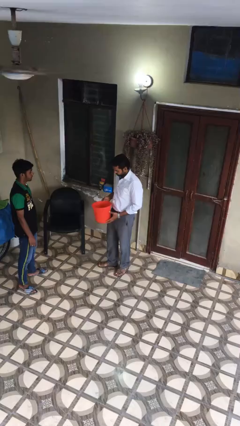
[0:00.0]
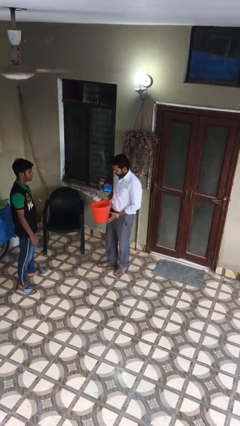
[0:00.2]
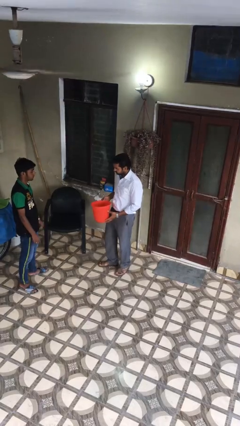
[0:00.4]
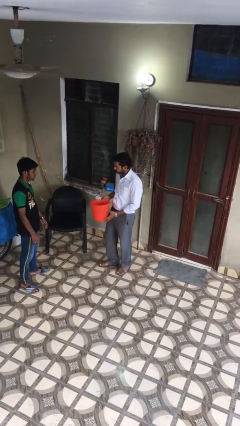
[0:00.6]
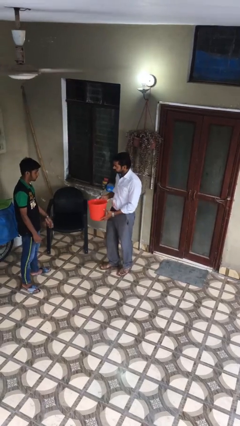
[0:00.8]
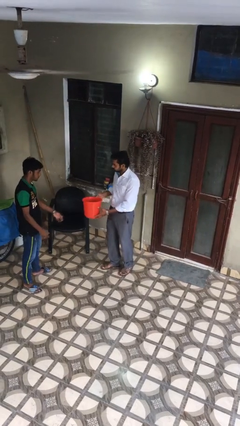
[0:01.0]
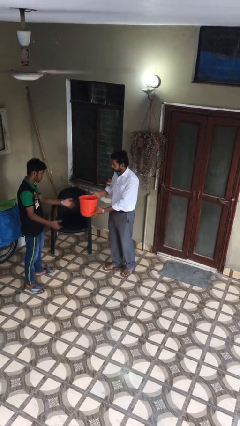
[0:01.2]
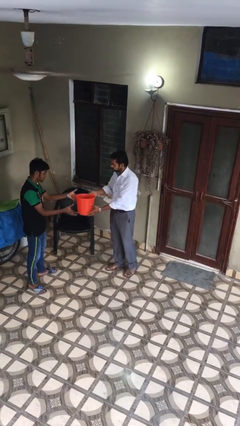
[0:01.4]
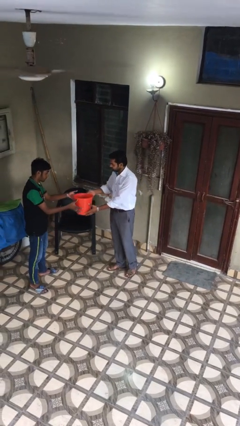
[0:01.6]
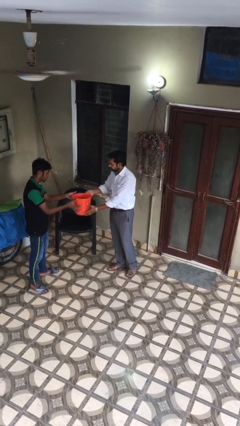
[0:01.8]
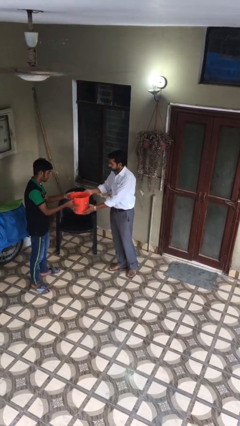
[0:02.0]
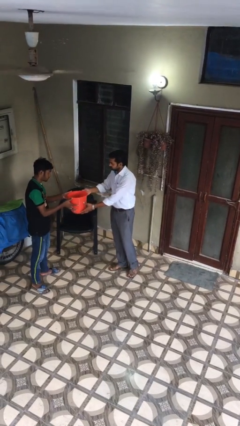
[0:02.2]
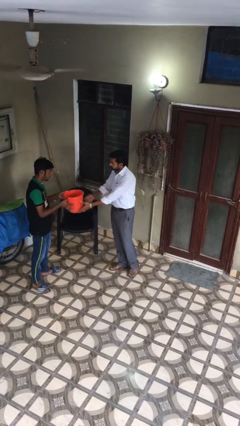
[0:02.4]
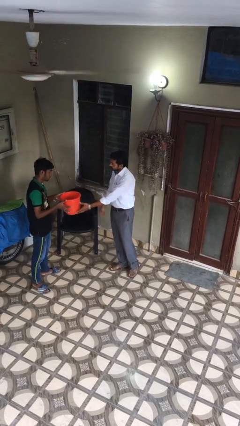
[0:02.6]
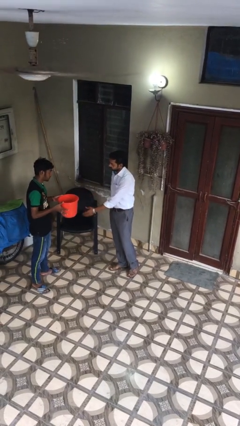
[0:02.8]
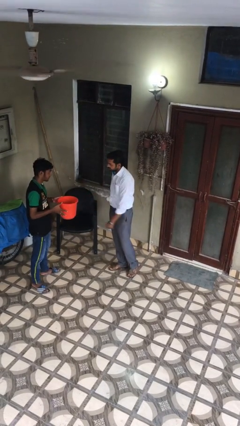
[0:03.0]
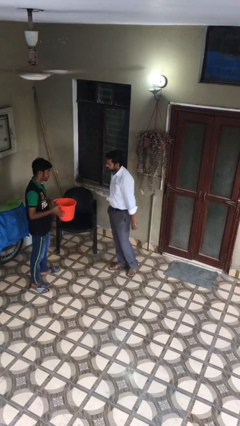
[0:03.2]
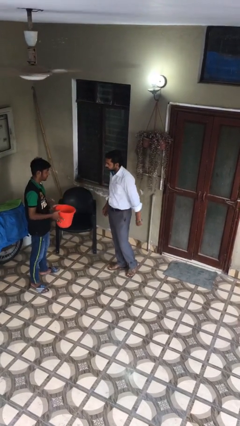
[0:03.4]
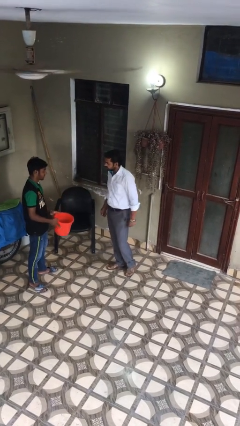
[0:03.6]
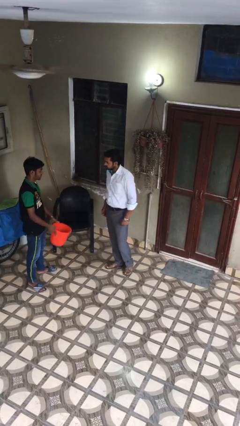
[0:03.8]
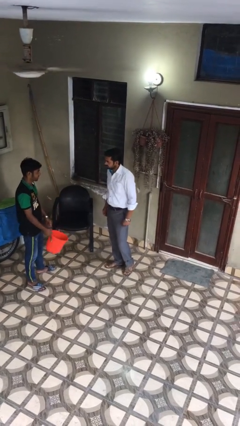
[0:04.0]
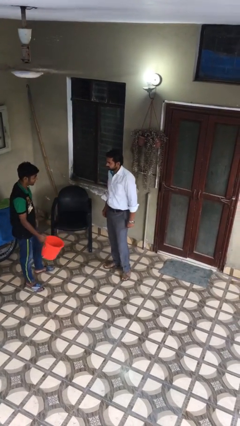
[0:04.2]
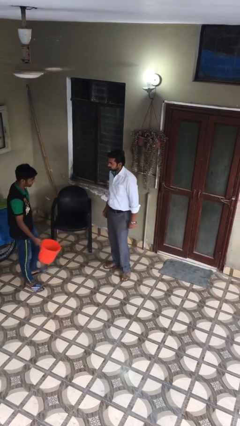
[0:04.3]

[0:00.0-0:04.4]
person transfers object to person

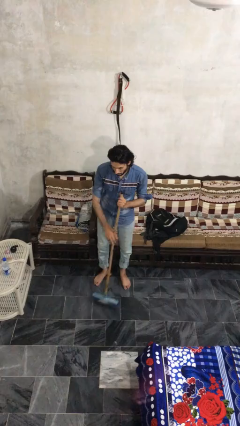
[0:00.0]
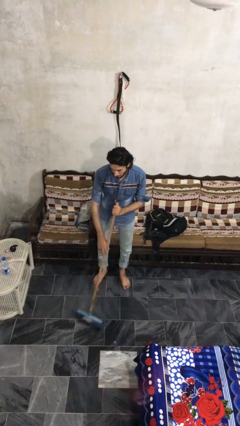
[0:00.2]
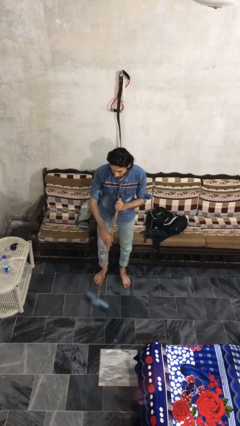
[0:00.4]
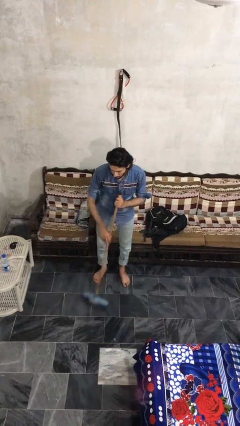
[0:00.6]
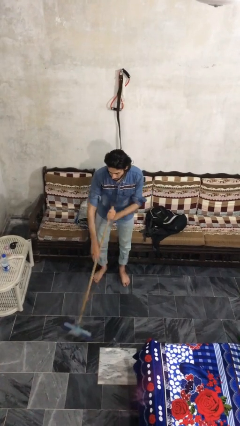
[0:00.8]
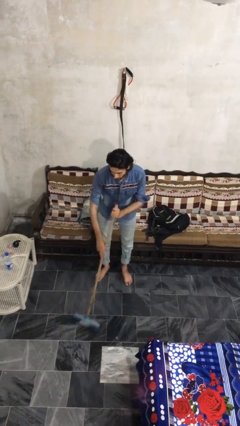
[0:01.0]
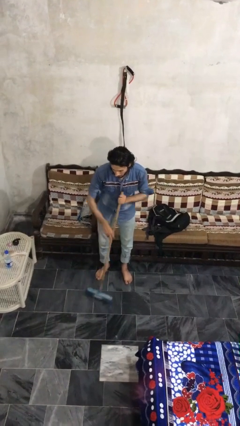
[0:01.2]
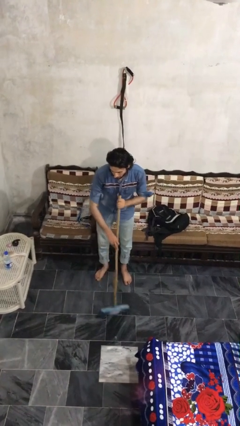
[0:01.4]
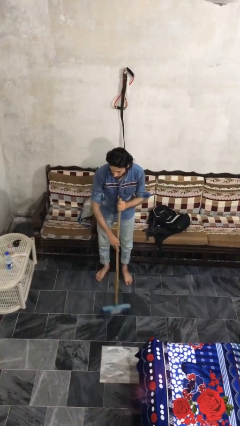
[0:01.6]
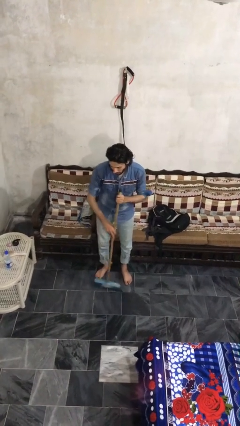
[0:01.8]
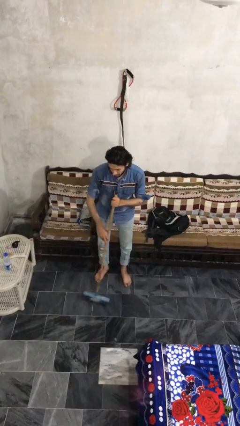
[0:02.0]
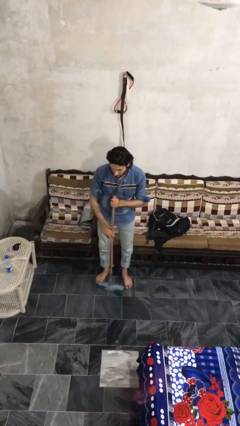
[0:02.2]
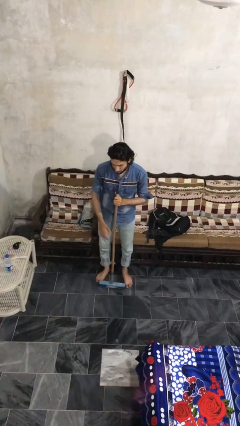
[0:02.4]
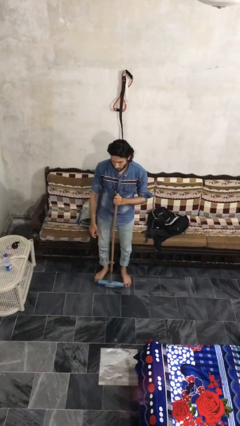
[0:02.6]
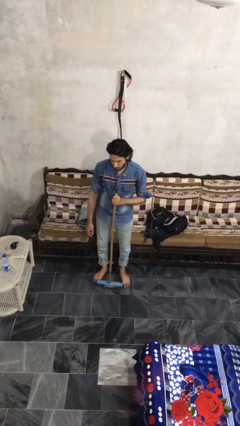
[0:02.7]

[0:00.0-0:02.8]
person sweeps floor

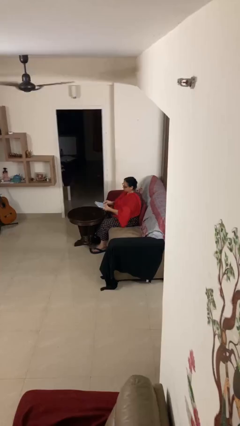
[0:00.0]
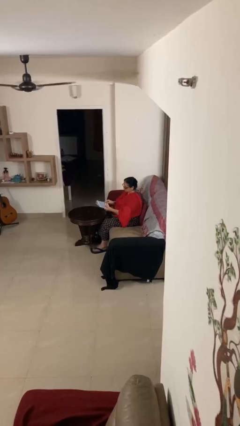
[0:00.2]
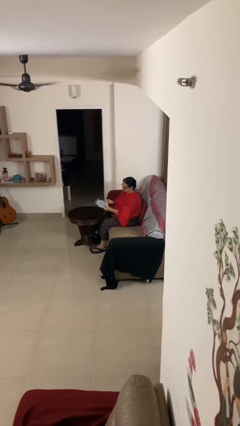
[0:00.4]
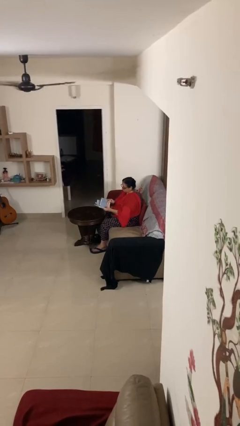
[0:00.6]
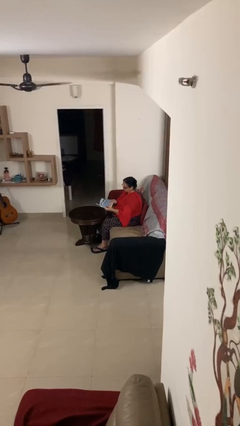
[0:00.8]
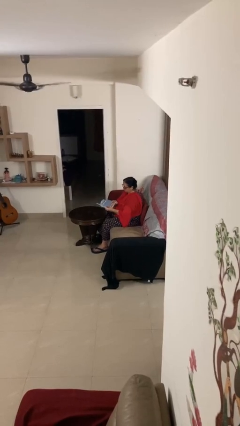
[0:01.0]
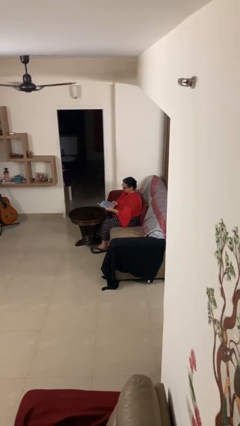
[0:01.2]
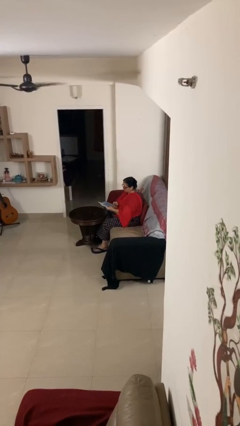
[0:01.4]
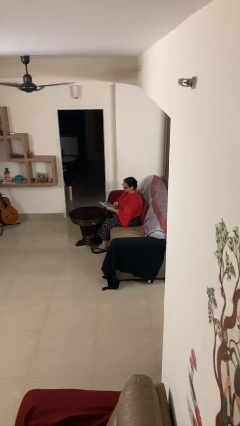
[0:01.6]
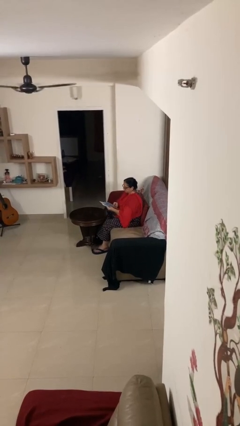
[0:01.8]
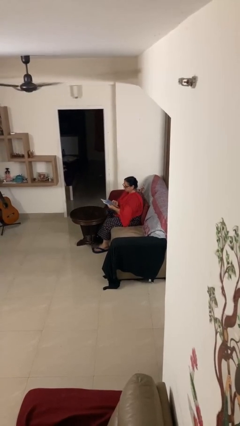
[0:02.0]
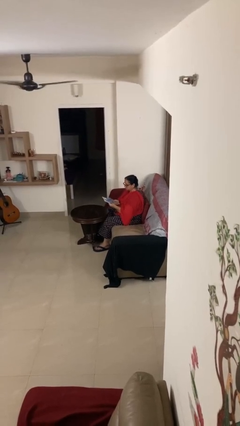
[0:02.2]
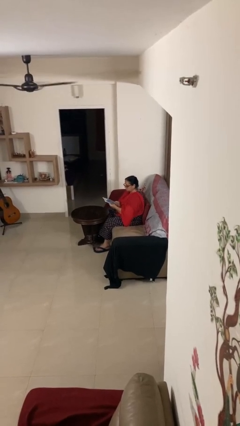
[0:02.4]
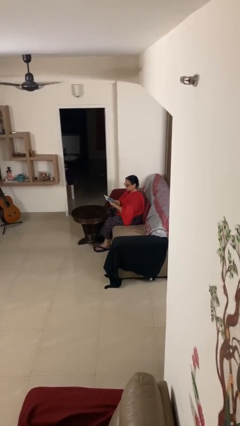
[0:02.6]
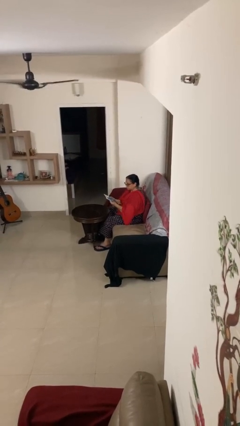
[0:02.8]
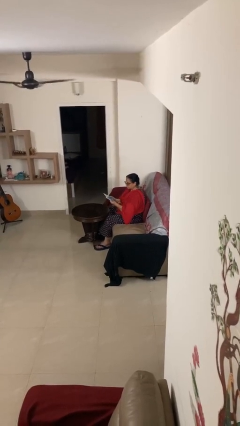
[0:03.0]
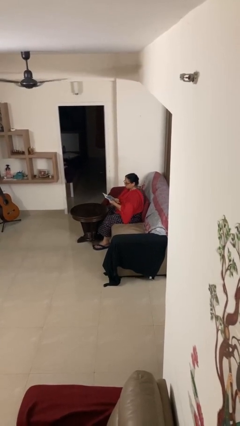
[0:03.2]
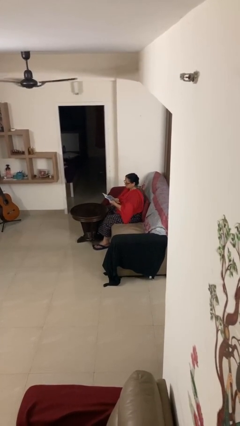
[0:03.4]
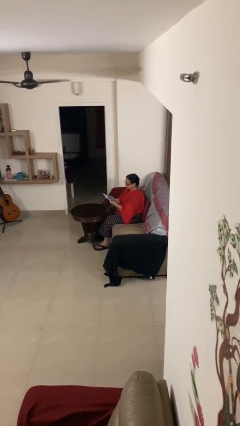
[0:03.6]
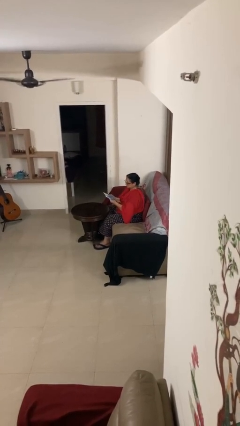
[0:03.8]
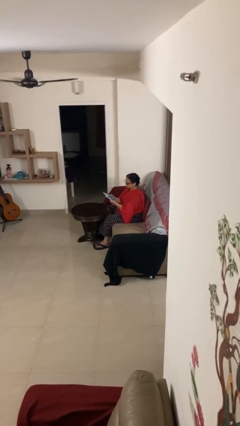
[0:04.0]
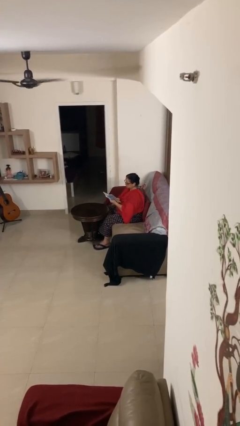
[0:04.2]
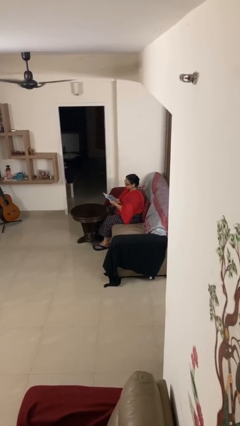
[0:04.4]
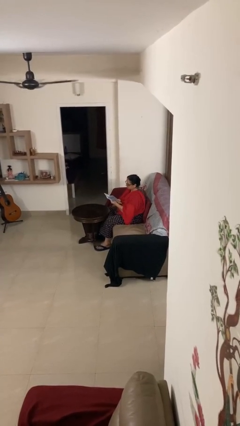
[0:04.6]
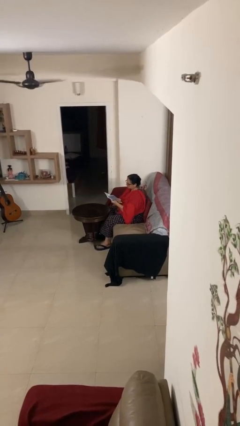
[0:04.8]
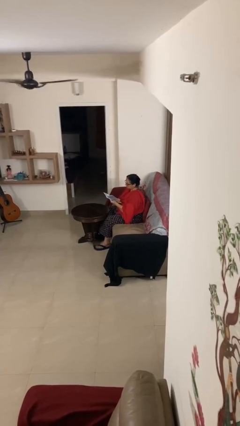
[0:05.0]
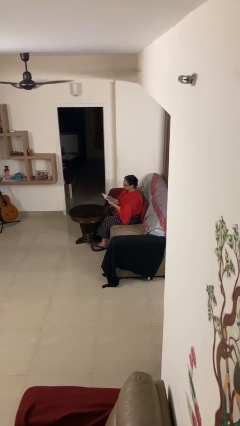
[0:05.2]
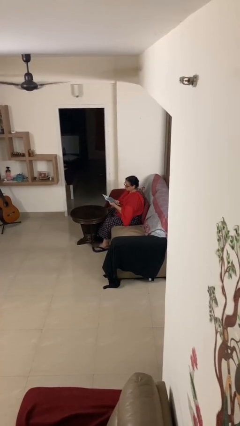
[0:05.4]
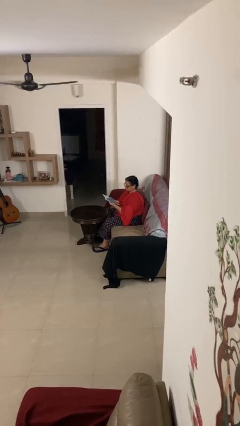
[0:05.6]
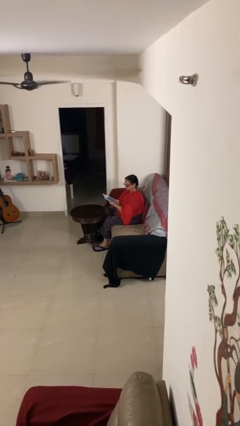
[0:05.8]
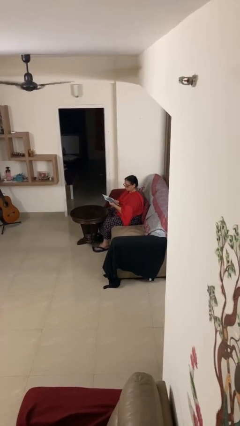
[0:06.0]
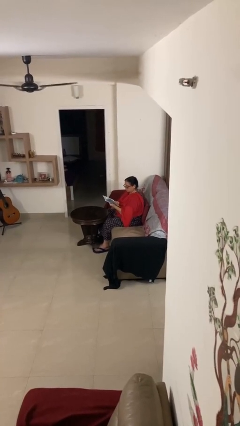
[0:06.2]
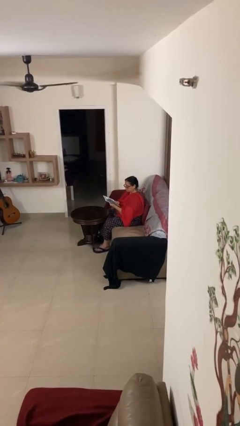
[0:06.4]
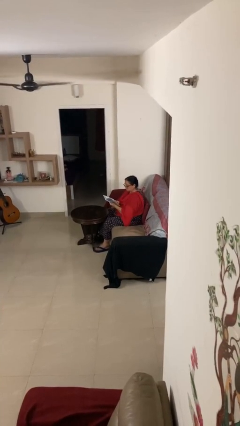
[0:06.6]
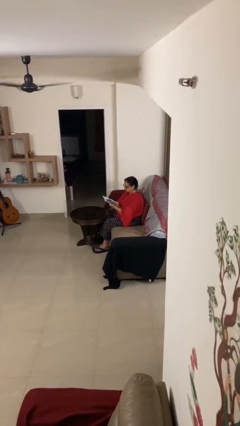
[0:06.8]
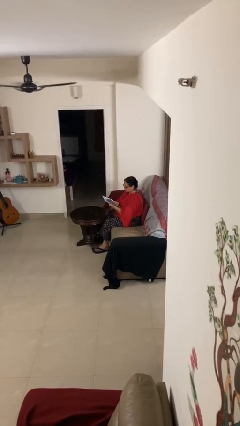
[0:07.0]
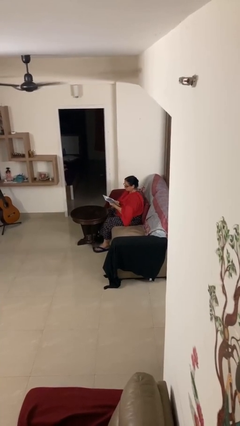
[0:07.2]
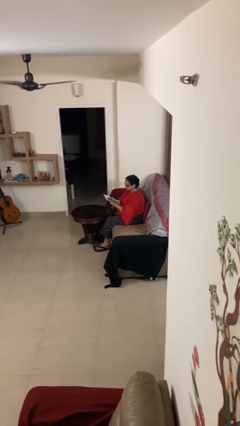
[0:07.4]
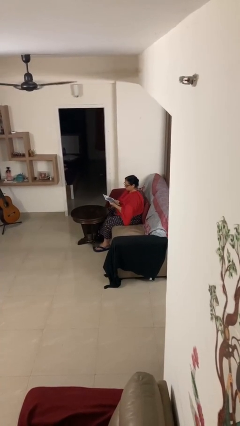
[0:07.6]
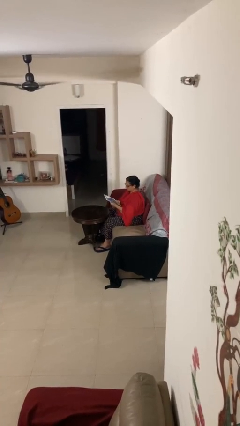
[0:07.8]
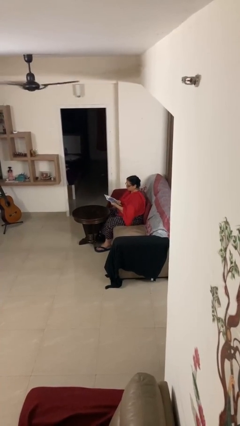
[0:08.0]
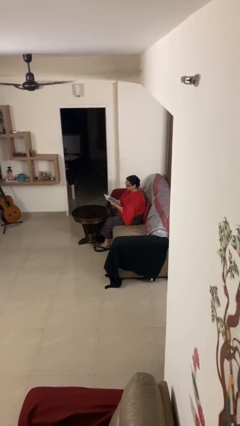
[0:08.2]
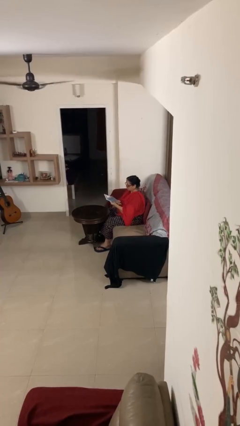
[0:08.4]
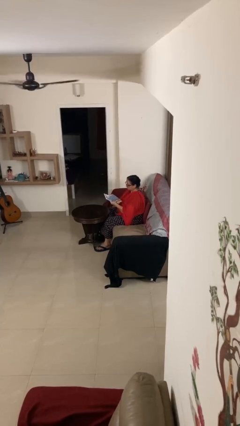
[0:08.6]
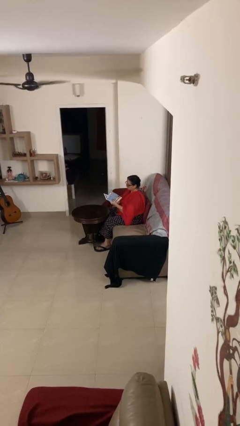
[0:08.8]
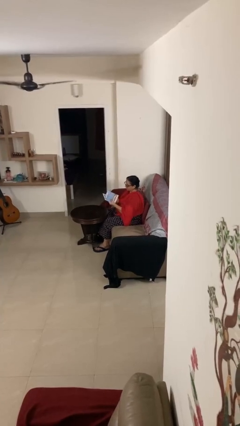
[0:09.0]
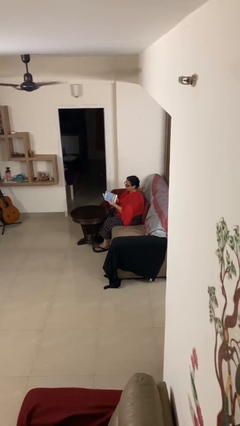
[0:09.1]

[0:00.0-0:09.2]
person reads document

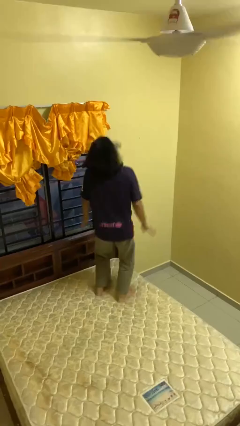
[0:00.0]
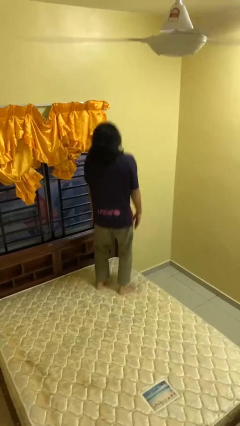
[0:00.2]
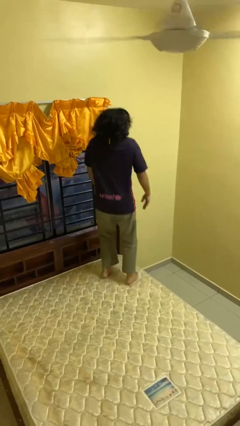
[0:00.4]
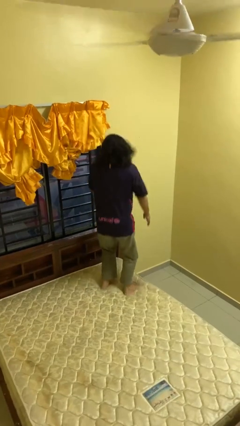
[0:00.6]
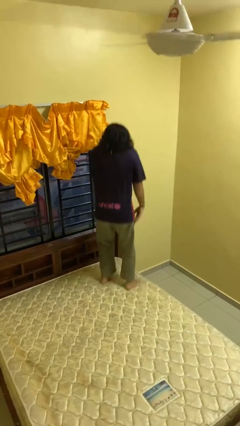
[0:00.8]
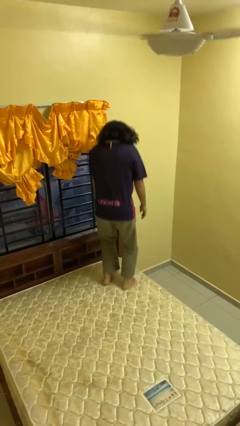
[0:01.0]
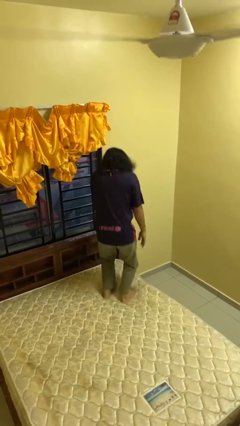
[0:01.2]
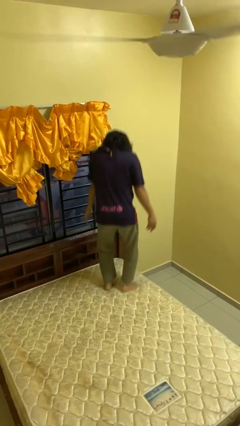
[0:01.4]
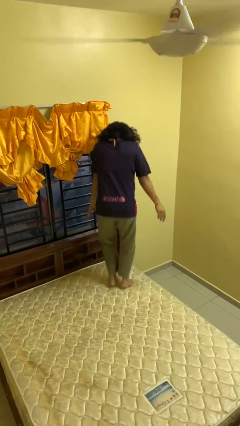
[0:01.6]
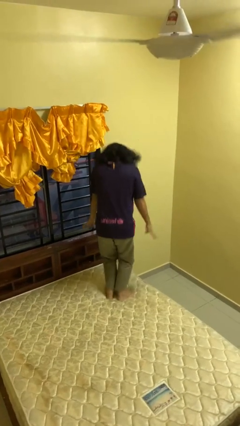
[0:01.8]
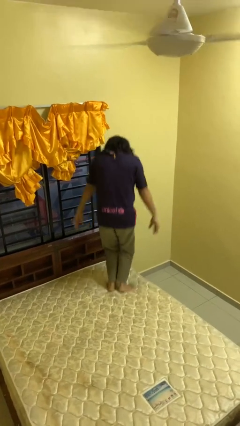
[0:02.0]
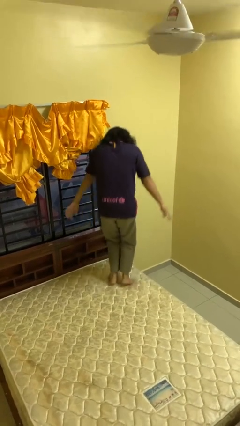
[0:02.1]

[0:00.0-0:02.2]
person jumps on bed
